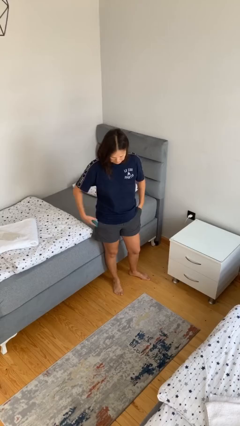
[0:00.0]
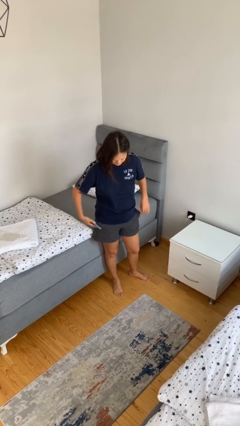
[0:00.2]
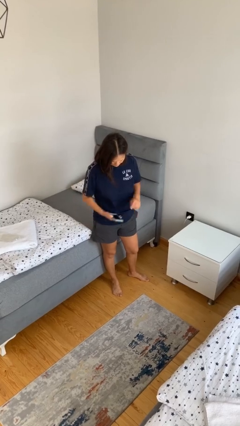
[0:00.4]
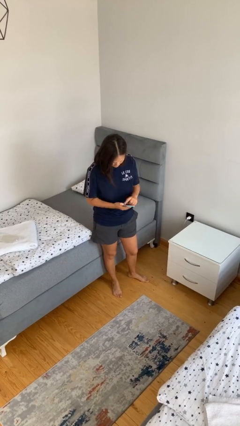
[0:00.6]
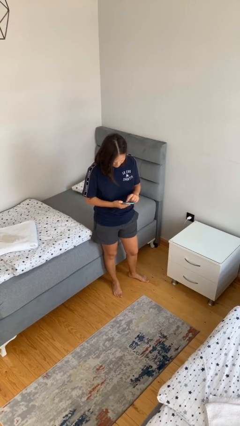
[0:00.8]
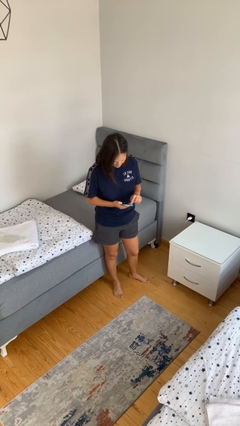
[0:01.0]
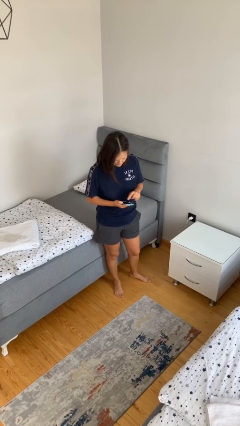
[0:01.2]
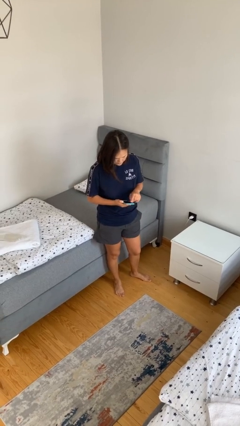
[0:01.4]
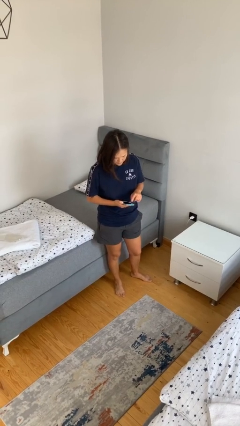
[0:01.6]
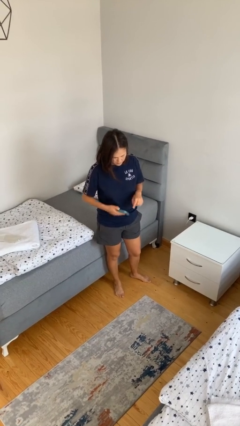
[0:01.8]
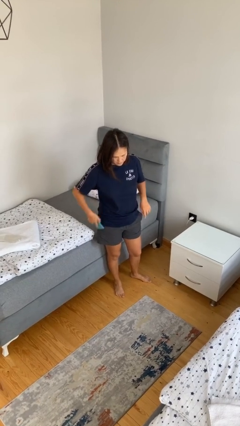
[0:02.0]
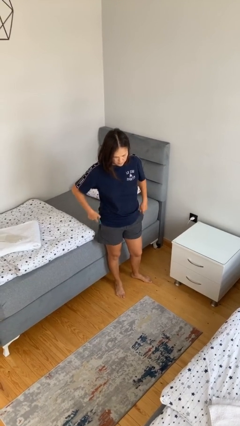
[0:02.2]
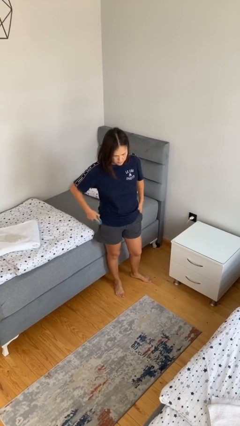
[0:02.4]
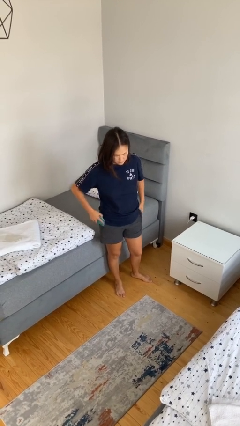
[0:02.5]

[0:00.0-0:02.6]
person takes phone from pocket

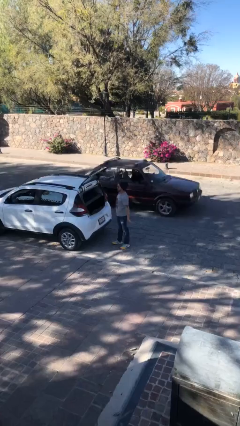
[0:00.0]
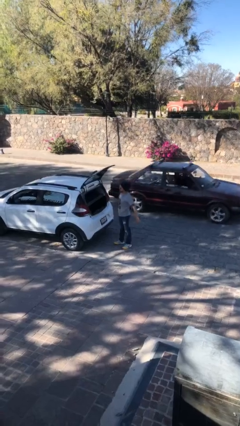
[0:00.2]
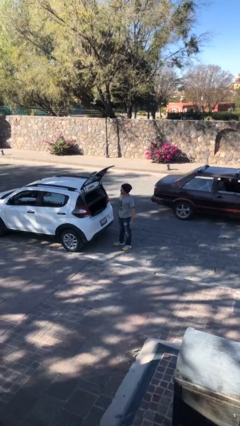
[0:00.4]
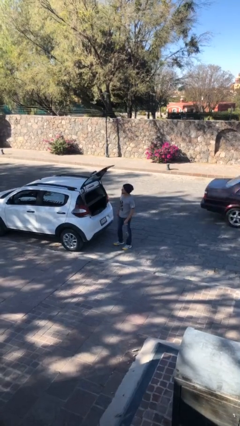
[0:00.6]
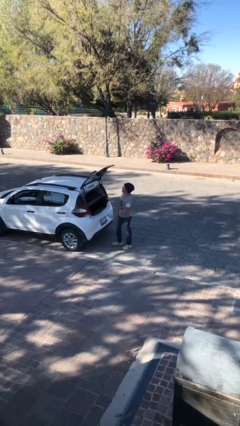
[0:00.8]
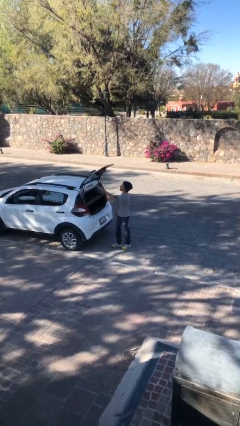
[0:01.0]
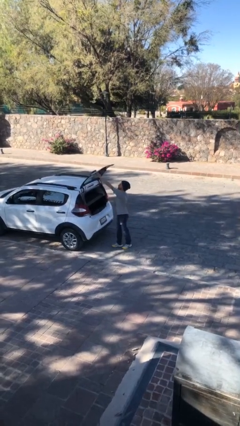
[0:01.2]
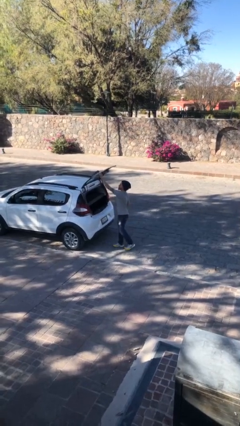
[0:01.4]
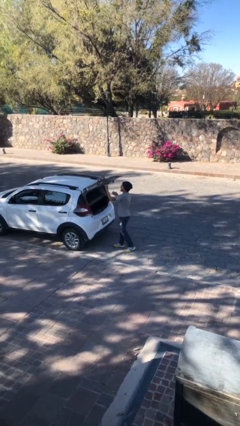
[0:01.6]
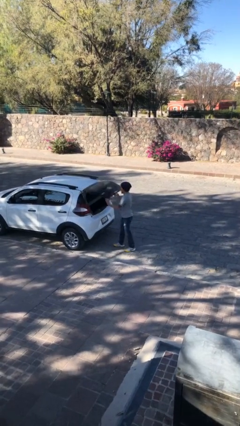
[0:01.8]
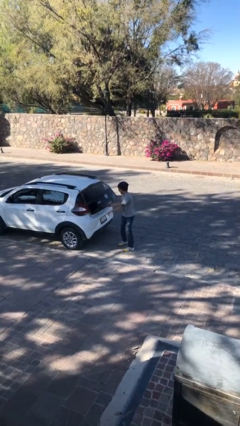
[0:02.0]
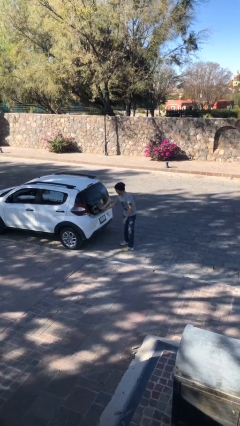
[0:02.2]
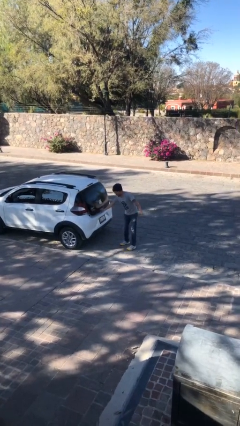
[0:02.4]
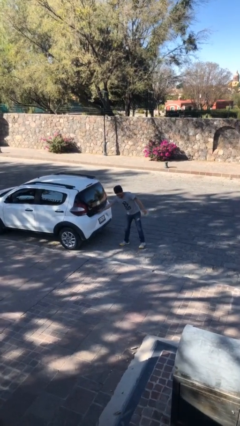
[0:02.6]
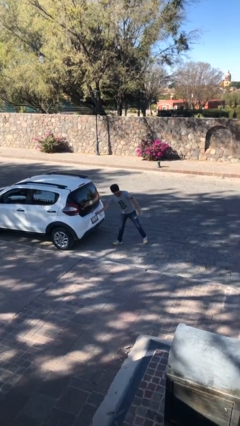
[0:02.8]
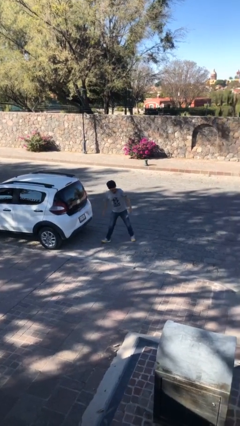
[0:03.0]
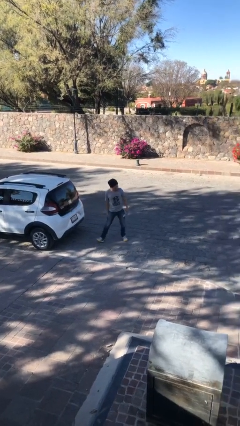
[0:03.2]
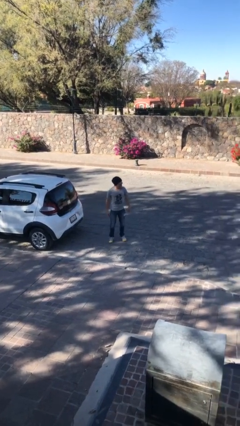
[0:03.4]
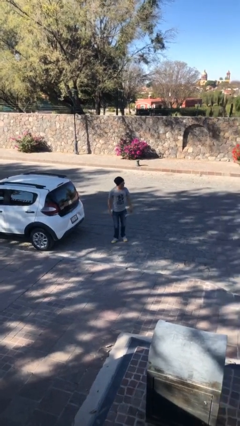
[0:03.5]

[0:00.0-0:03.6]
person closes car trunk

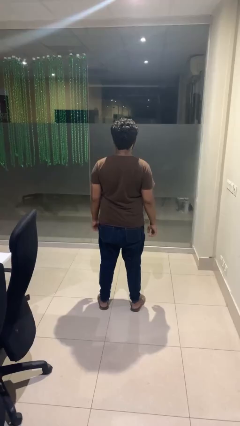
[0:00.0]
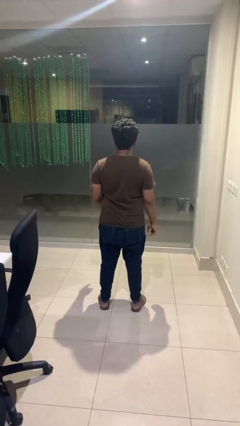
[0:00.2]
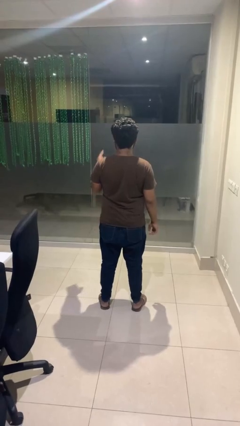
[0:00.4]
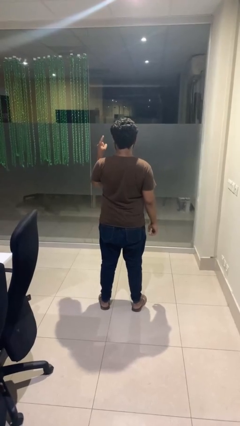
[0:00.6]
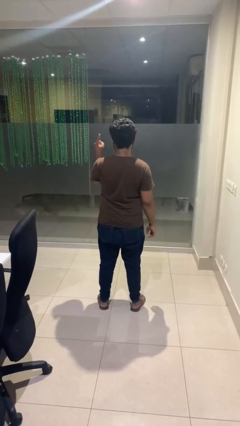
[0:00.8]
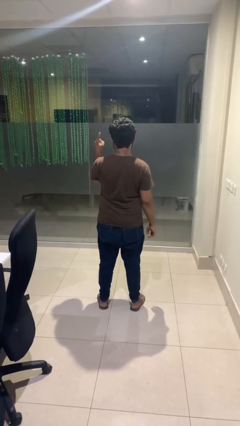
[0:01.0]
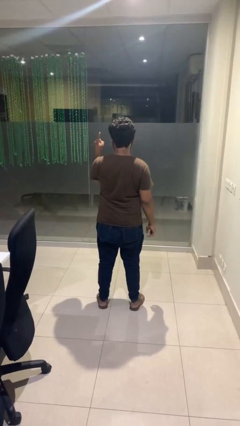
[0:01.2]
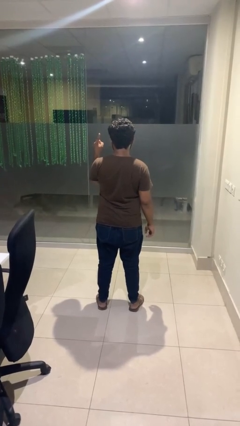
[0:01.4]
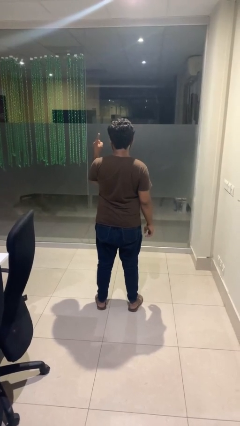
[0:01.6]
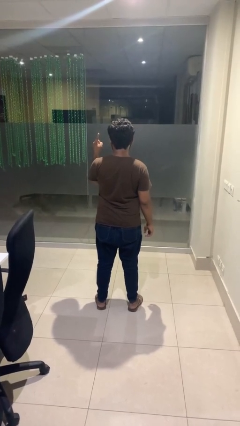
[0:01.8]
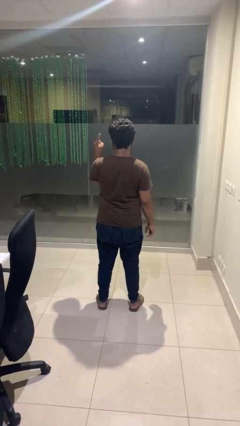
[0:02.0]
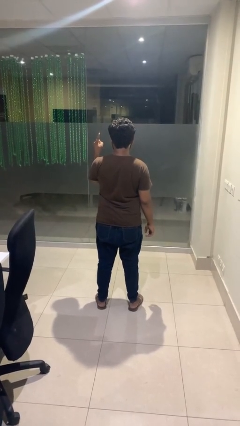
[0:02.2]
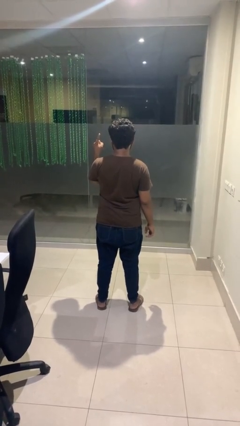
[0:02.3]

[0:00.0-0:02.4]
person gestures number one

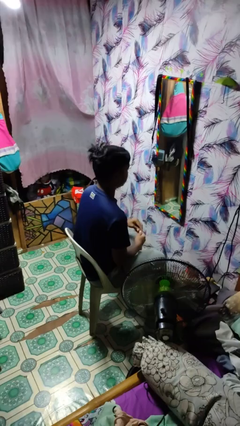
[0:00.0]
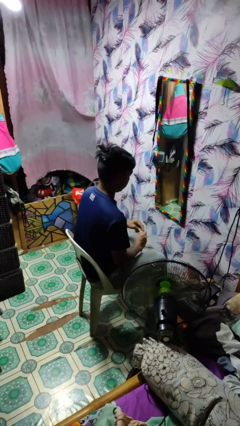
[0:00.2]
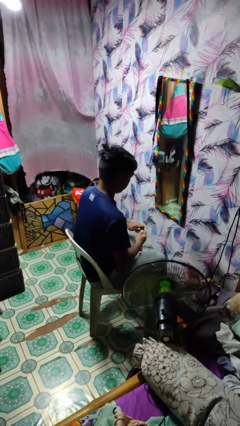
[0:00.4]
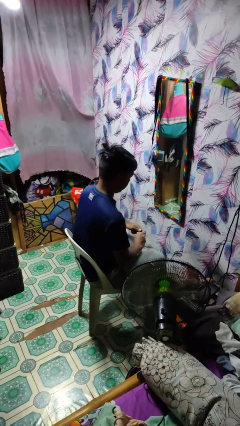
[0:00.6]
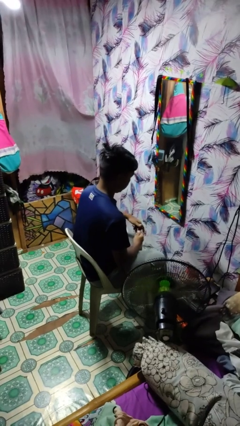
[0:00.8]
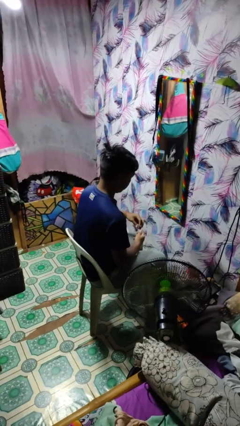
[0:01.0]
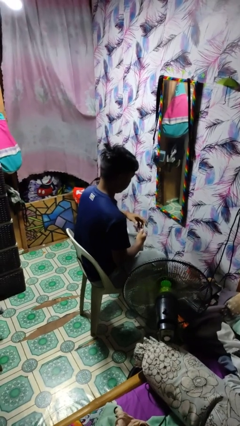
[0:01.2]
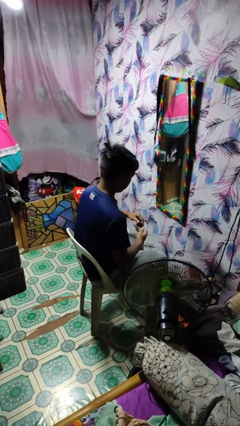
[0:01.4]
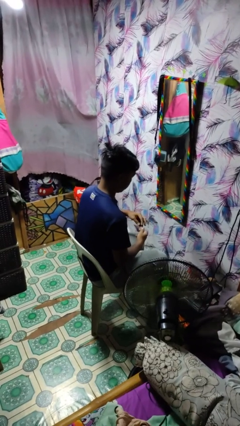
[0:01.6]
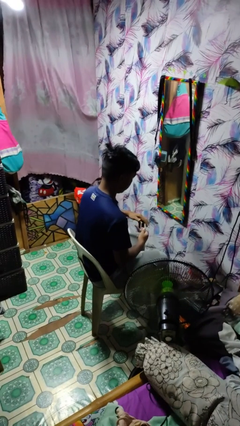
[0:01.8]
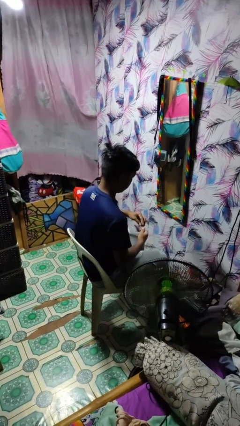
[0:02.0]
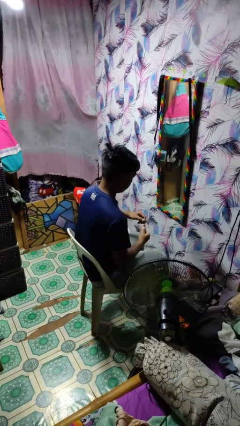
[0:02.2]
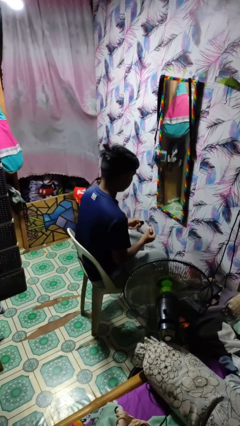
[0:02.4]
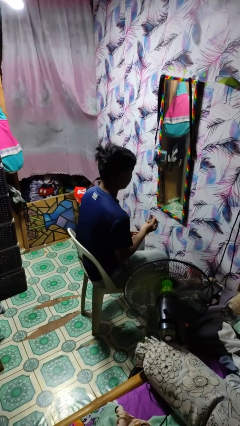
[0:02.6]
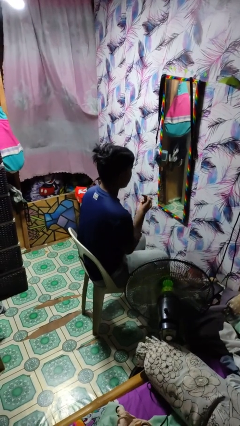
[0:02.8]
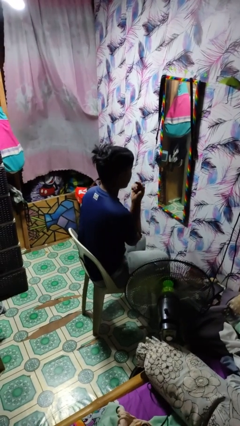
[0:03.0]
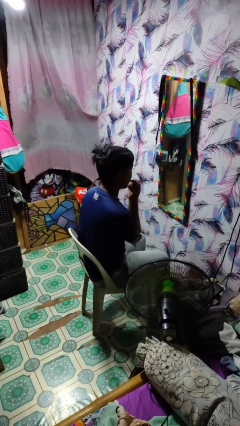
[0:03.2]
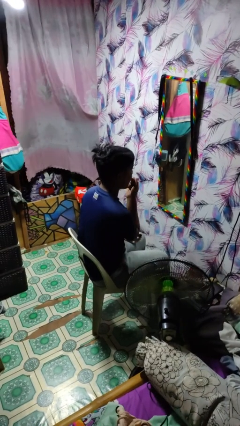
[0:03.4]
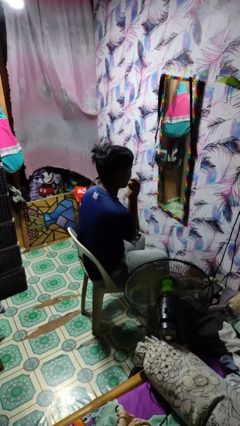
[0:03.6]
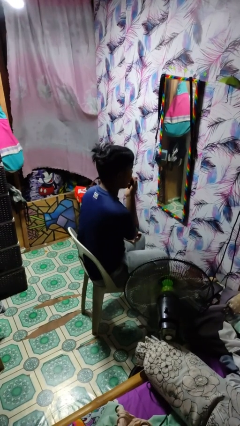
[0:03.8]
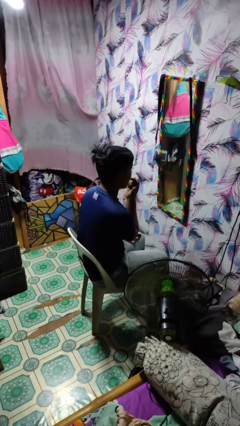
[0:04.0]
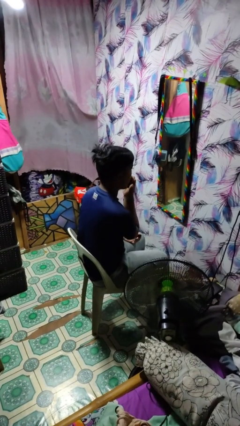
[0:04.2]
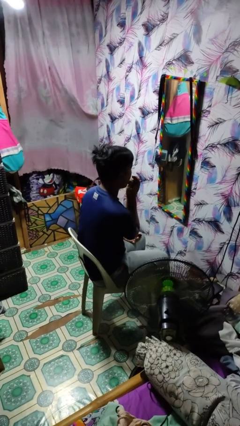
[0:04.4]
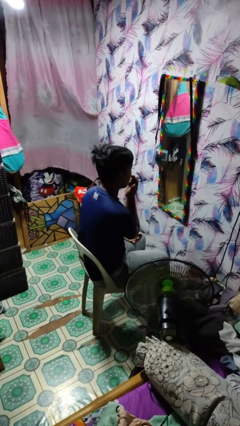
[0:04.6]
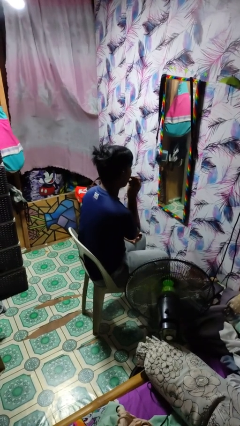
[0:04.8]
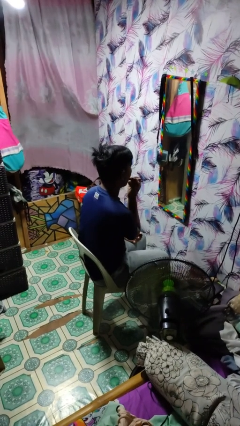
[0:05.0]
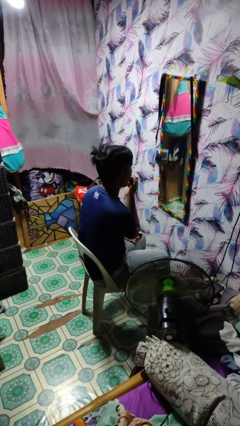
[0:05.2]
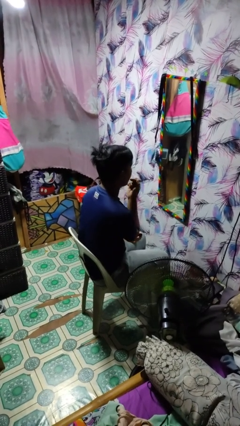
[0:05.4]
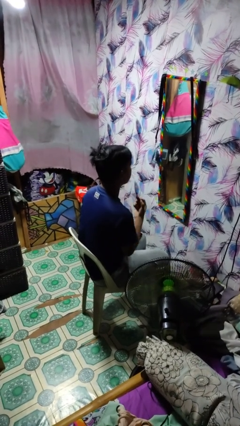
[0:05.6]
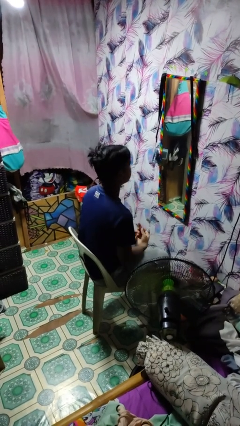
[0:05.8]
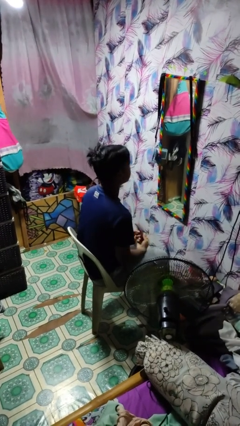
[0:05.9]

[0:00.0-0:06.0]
person applies lip makeup

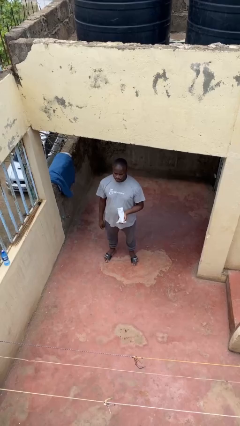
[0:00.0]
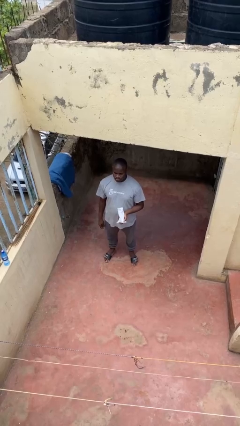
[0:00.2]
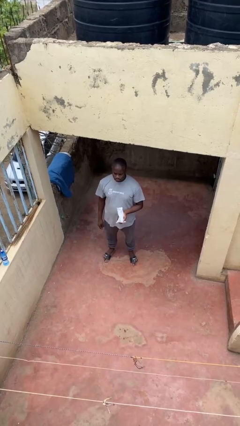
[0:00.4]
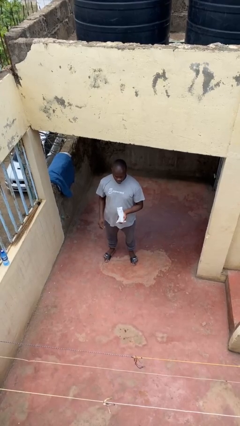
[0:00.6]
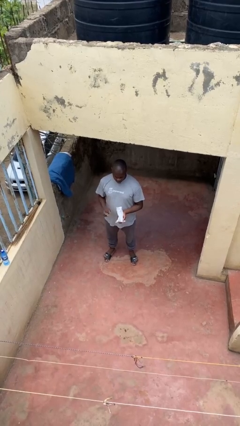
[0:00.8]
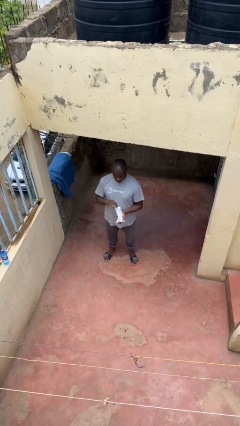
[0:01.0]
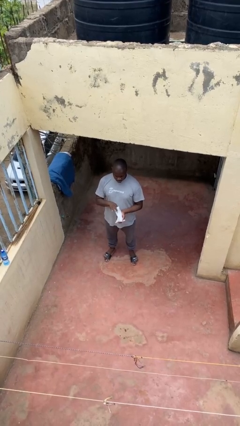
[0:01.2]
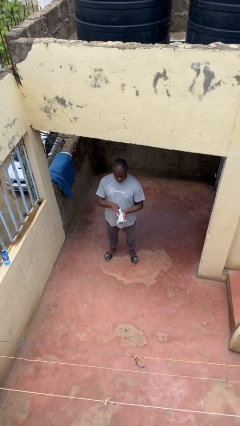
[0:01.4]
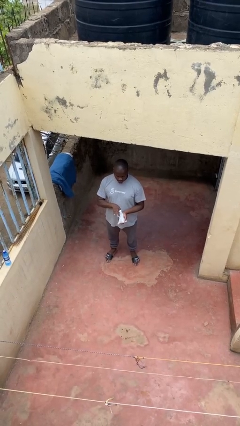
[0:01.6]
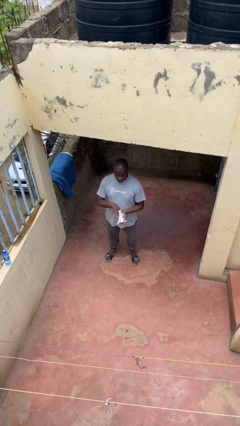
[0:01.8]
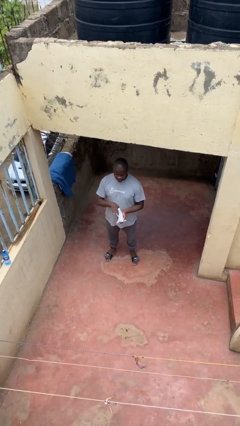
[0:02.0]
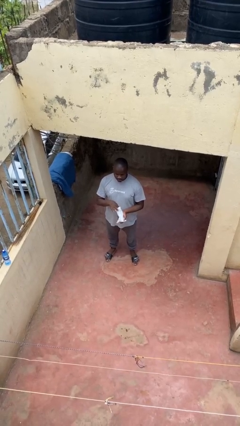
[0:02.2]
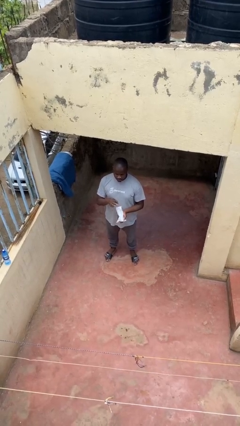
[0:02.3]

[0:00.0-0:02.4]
person eats snack from bag

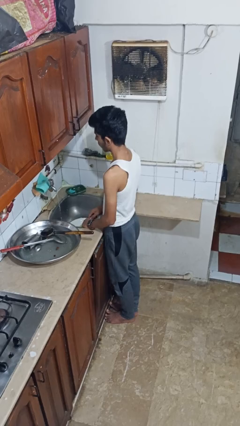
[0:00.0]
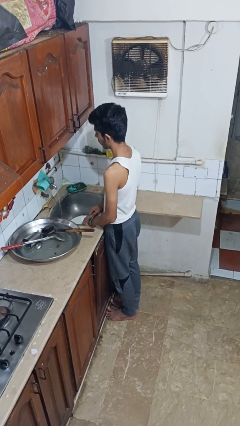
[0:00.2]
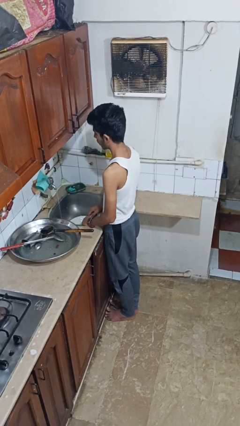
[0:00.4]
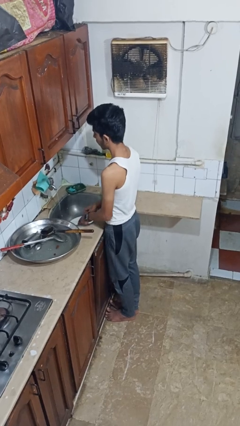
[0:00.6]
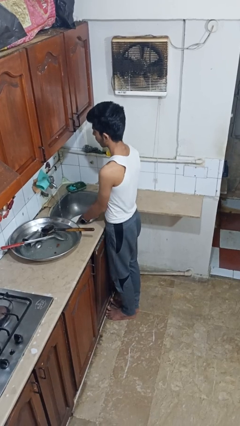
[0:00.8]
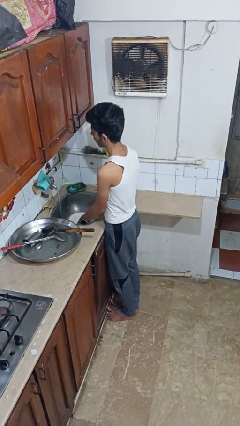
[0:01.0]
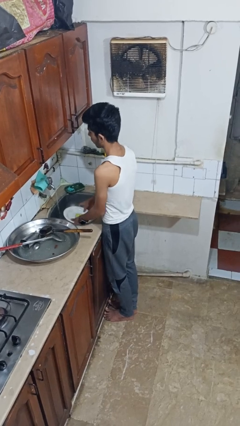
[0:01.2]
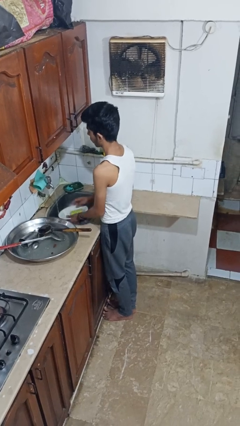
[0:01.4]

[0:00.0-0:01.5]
person washes dish
